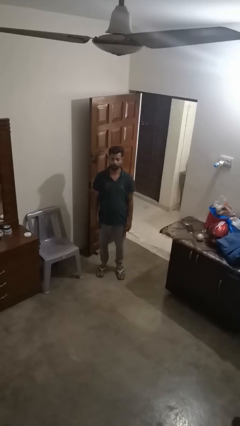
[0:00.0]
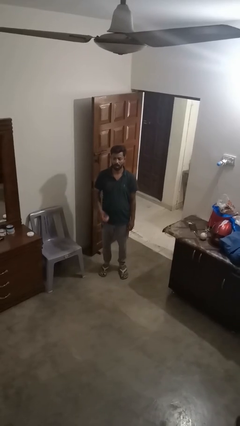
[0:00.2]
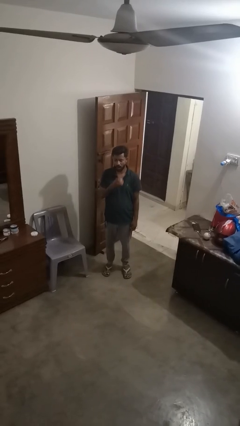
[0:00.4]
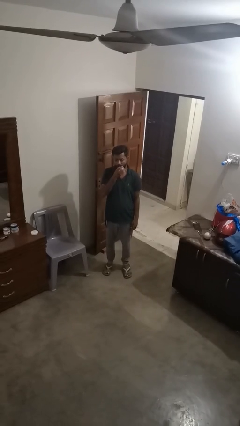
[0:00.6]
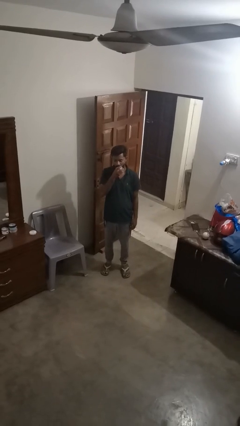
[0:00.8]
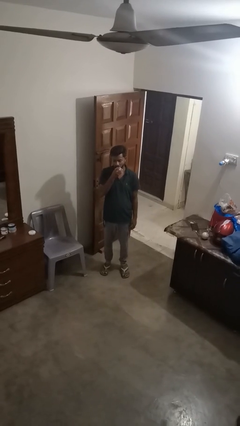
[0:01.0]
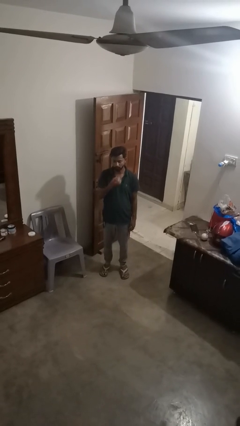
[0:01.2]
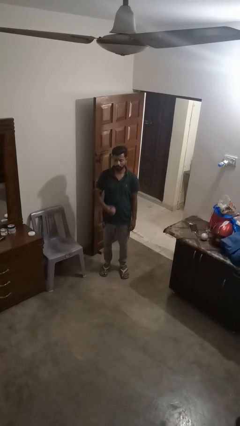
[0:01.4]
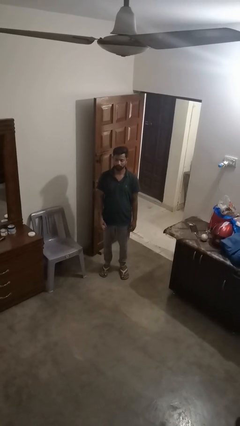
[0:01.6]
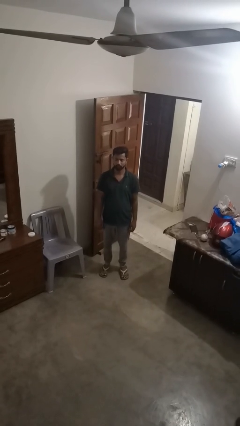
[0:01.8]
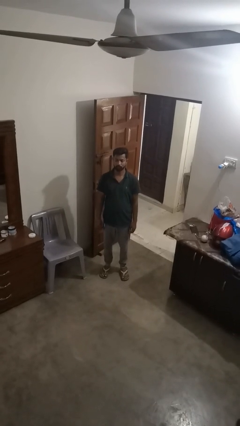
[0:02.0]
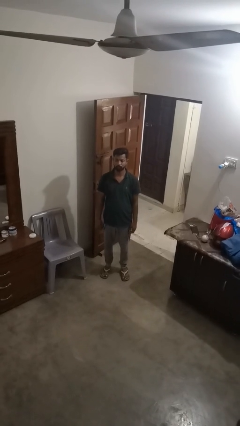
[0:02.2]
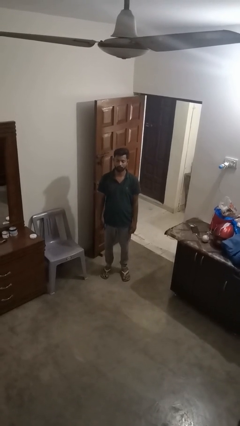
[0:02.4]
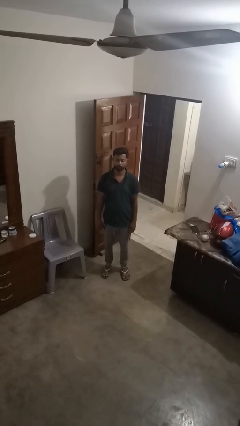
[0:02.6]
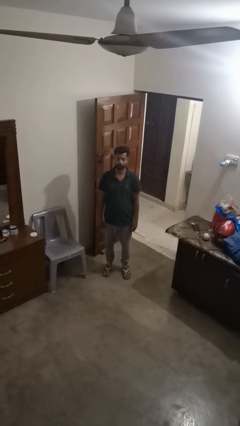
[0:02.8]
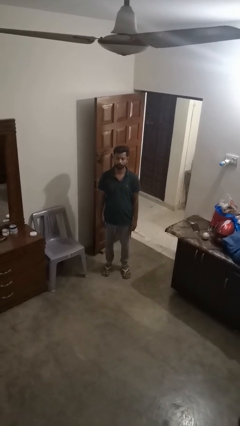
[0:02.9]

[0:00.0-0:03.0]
person eats apple

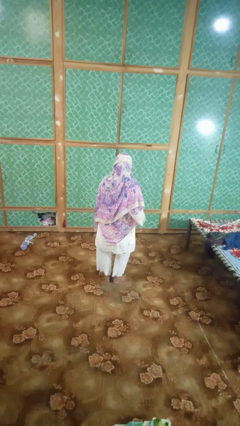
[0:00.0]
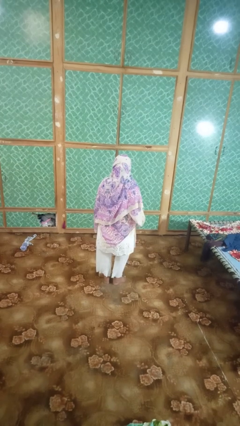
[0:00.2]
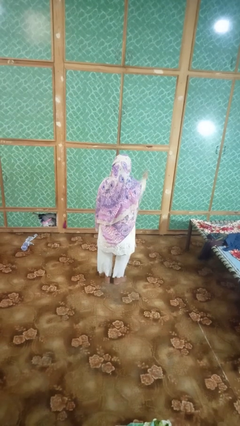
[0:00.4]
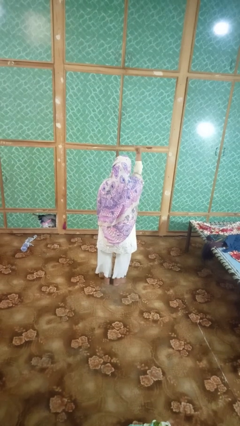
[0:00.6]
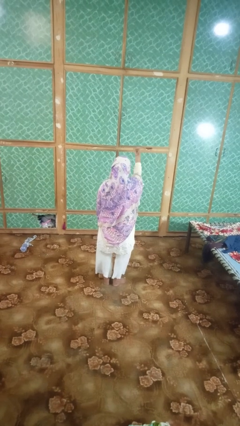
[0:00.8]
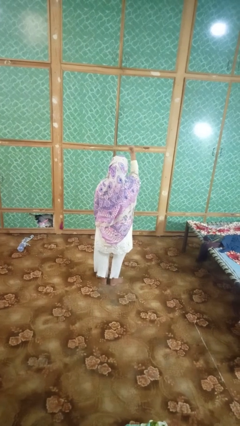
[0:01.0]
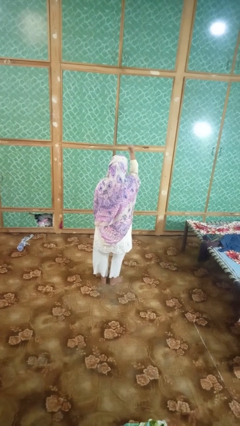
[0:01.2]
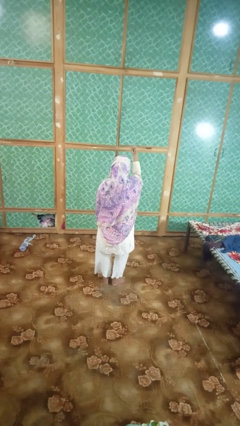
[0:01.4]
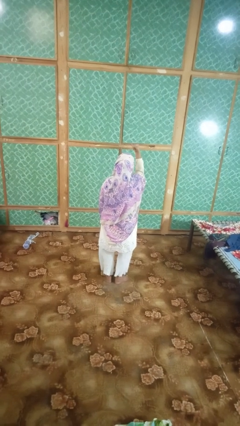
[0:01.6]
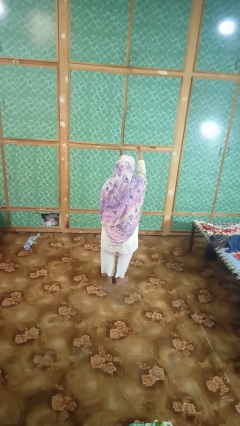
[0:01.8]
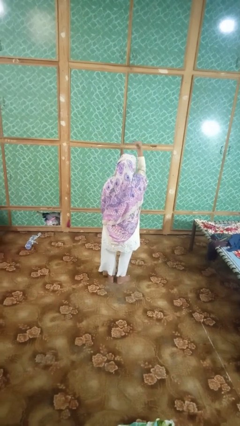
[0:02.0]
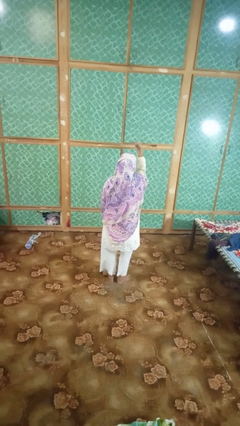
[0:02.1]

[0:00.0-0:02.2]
person gestures hang loose

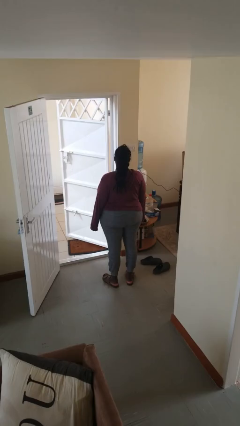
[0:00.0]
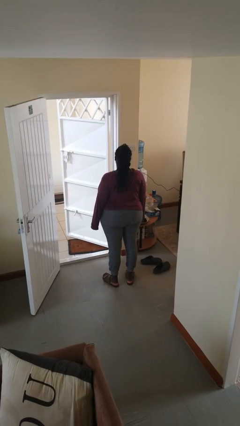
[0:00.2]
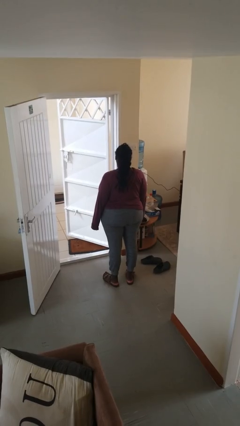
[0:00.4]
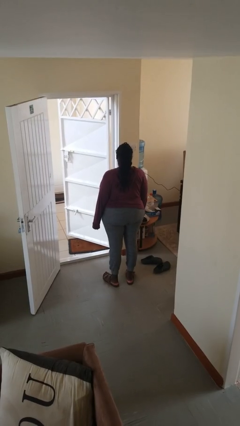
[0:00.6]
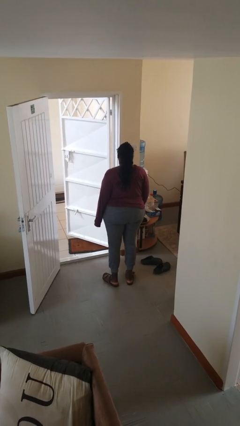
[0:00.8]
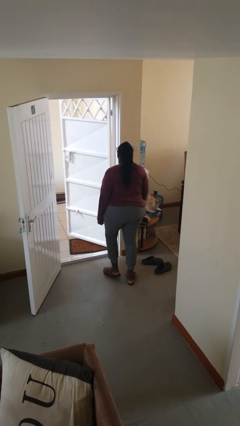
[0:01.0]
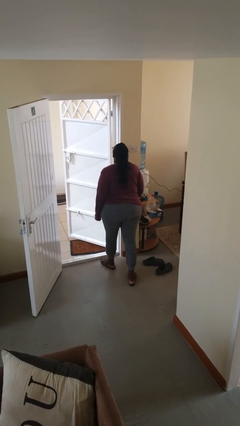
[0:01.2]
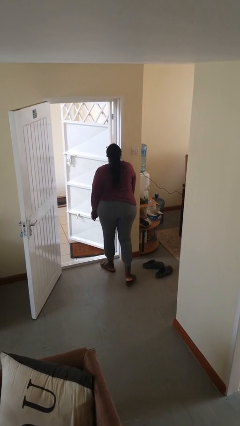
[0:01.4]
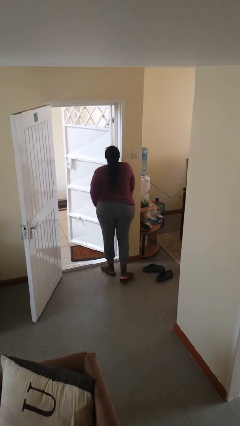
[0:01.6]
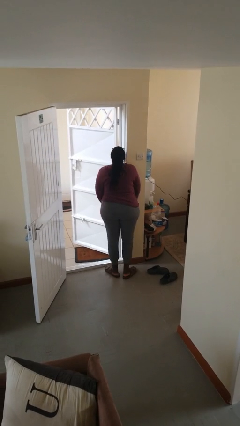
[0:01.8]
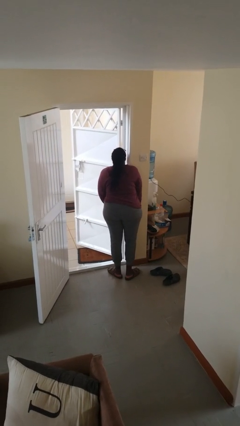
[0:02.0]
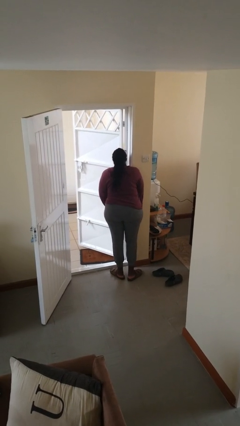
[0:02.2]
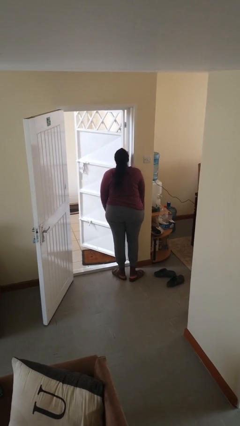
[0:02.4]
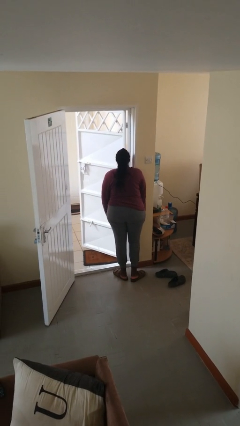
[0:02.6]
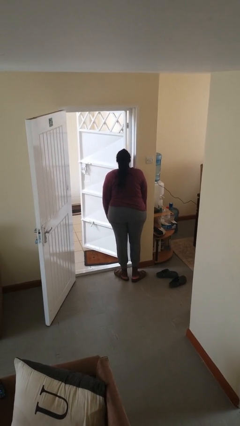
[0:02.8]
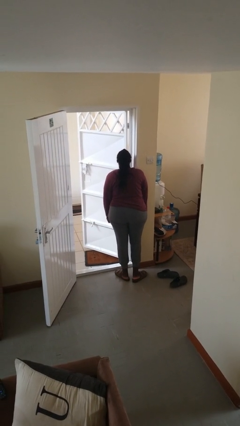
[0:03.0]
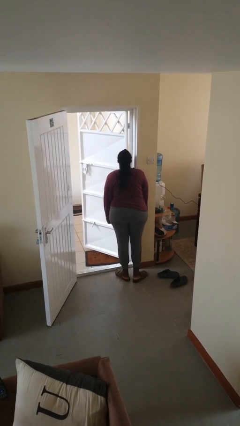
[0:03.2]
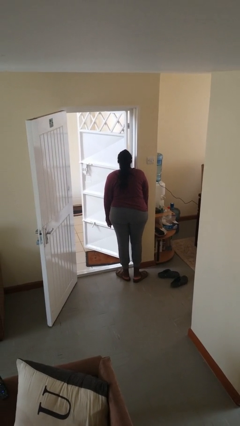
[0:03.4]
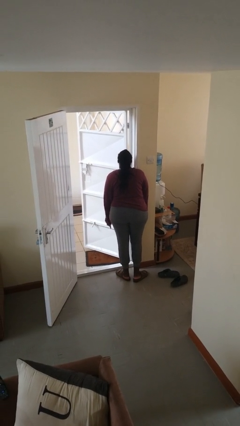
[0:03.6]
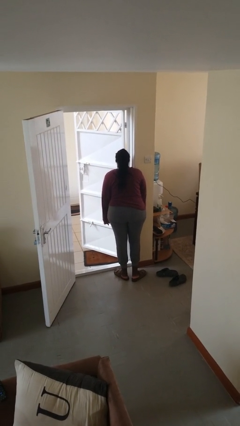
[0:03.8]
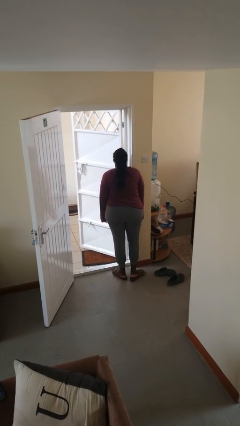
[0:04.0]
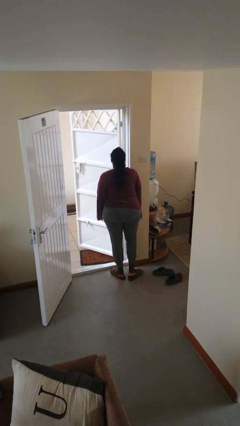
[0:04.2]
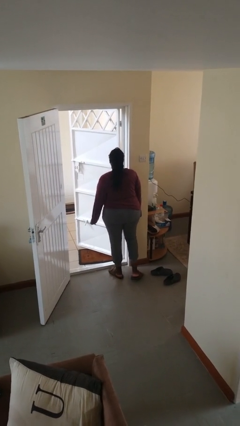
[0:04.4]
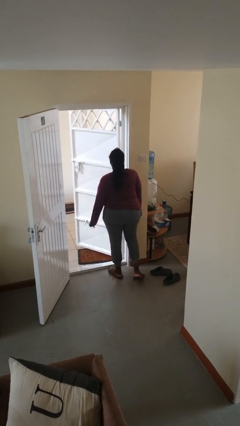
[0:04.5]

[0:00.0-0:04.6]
person bumps into wall

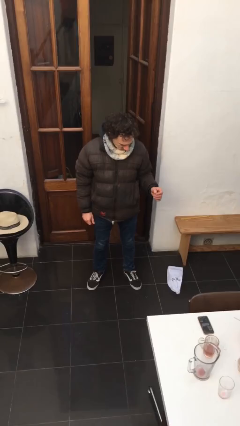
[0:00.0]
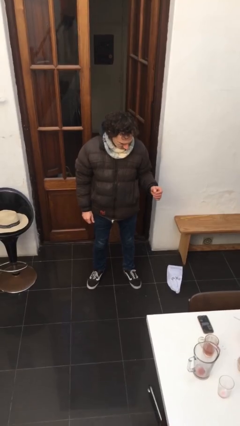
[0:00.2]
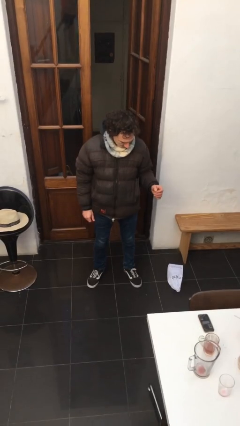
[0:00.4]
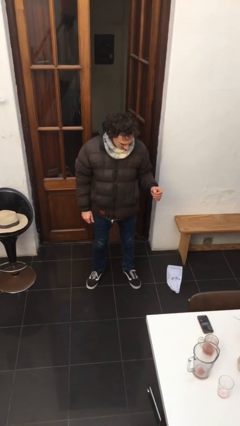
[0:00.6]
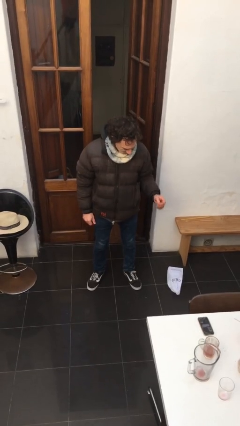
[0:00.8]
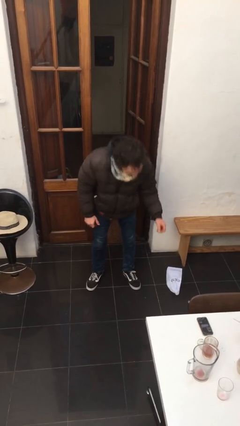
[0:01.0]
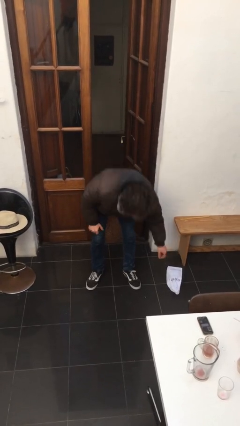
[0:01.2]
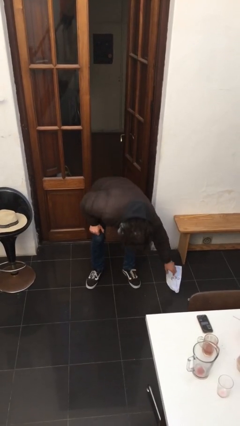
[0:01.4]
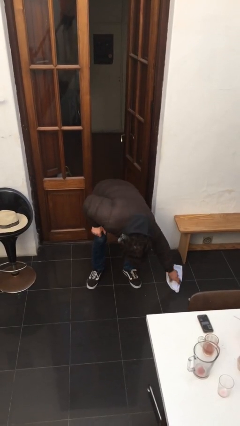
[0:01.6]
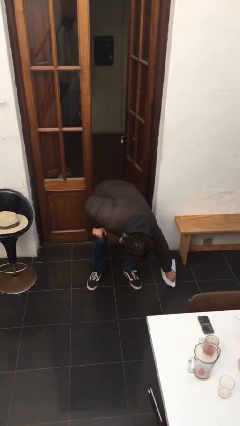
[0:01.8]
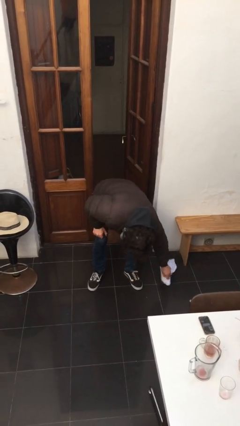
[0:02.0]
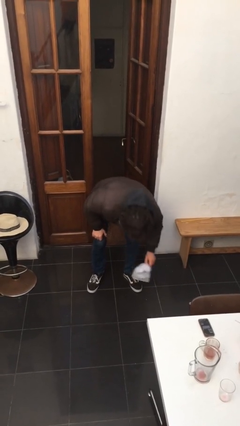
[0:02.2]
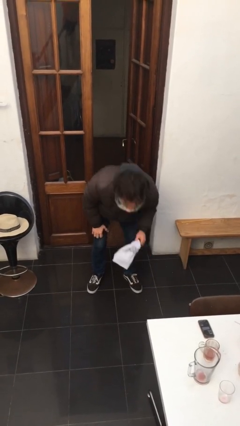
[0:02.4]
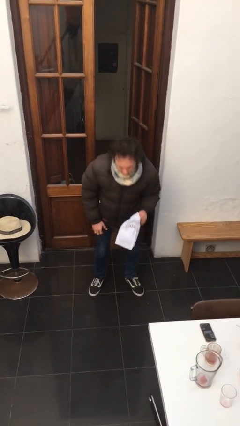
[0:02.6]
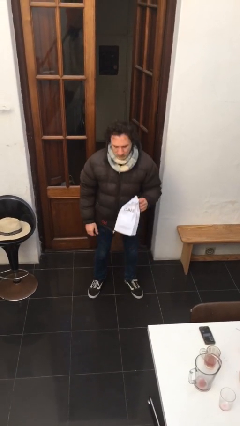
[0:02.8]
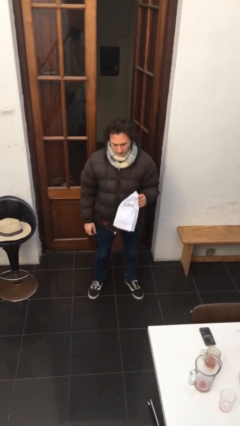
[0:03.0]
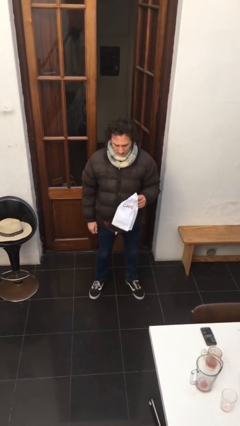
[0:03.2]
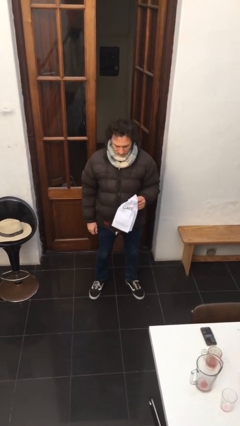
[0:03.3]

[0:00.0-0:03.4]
person picks up object from floor

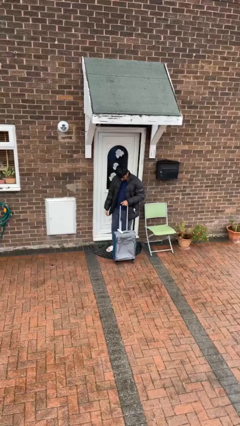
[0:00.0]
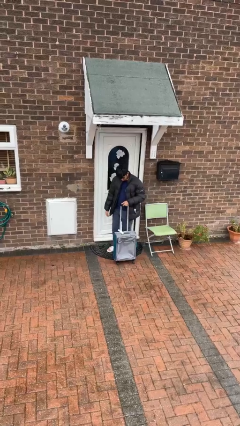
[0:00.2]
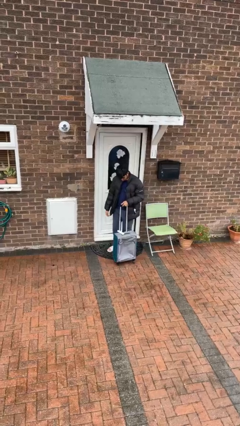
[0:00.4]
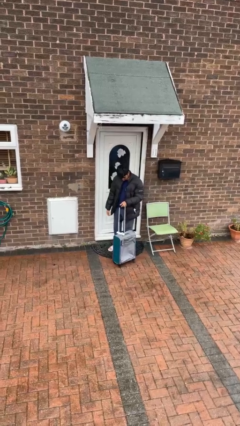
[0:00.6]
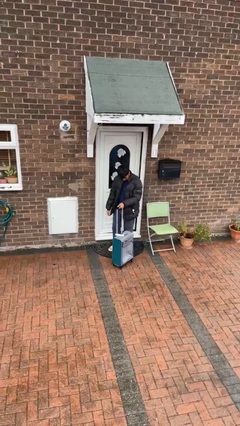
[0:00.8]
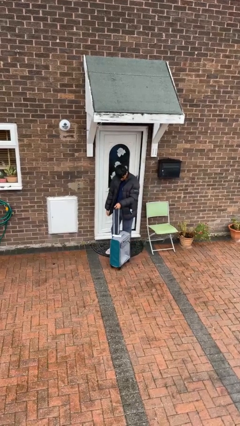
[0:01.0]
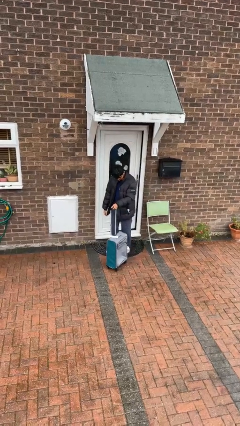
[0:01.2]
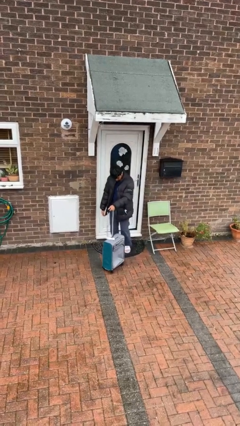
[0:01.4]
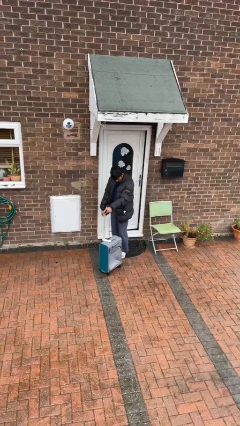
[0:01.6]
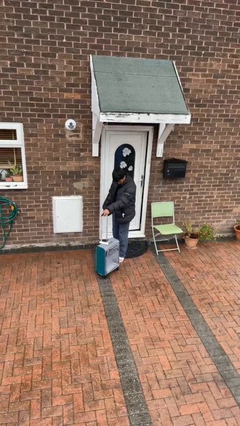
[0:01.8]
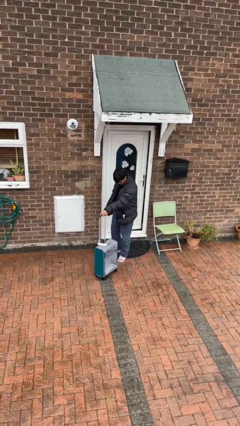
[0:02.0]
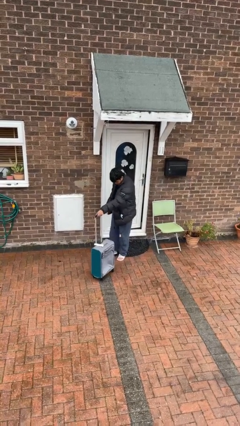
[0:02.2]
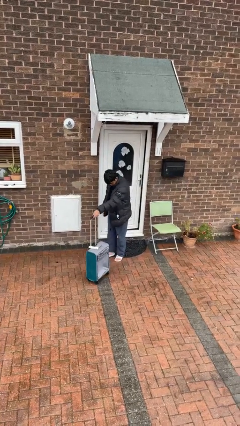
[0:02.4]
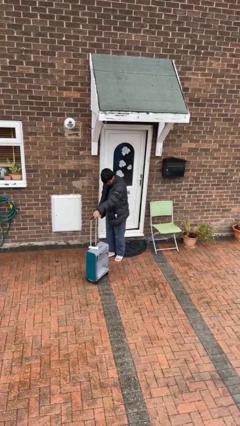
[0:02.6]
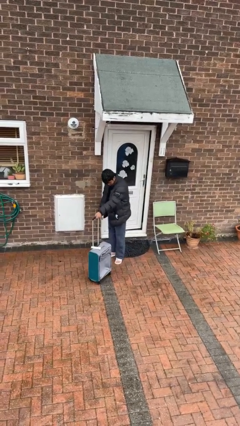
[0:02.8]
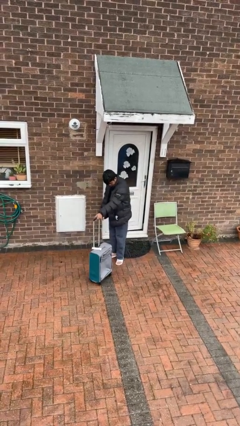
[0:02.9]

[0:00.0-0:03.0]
person pushes wheeled cart

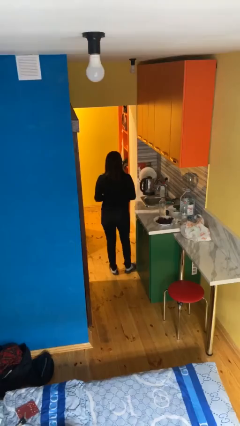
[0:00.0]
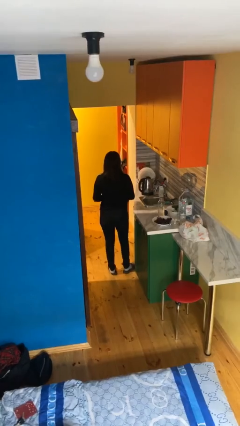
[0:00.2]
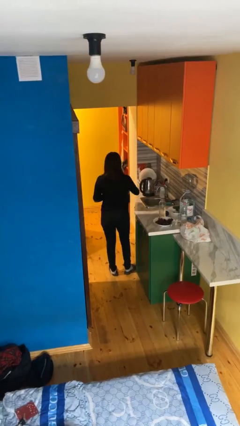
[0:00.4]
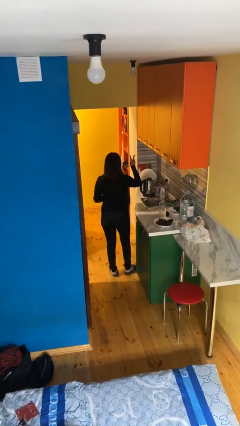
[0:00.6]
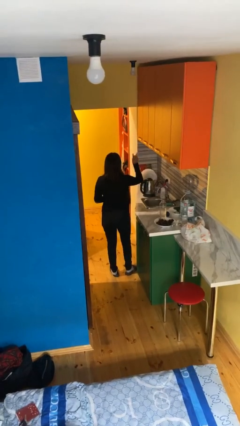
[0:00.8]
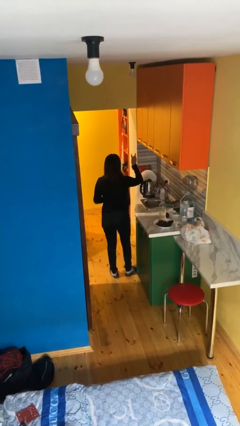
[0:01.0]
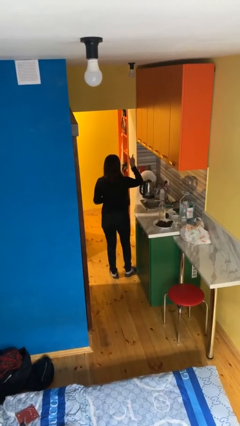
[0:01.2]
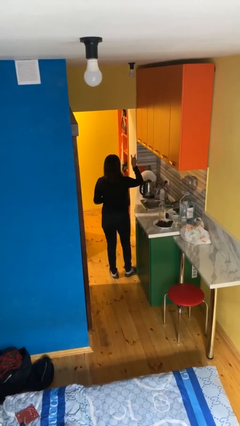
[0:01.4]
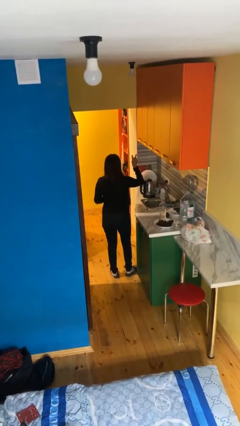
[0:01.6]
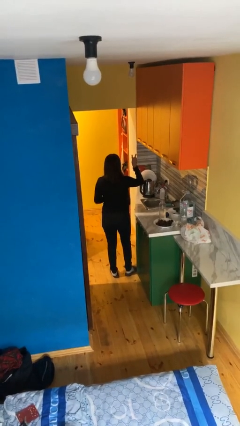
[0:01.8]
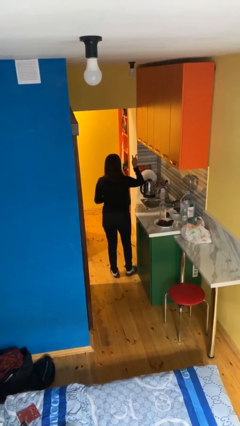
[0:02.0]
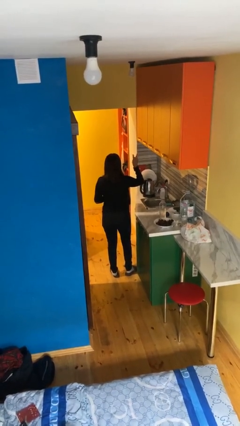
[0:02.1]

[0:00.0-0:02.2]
person gestures peace
